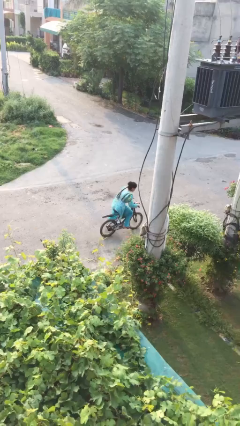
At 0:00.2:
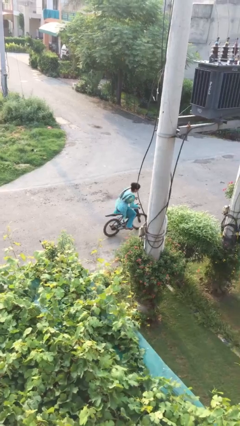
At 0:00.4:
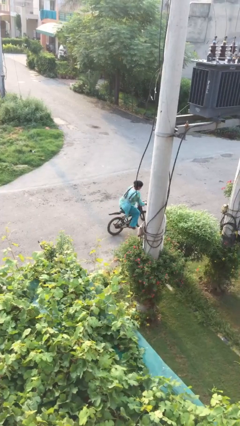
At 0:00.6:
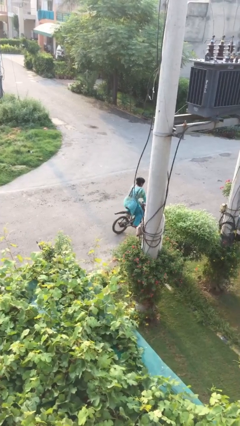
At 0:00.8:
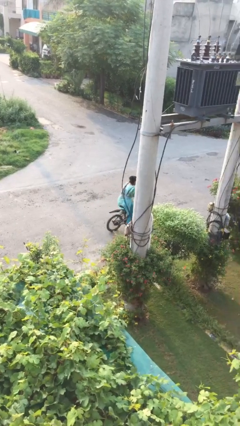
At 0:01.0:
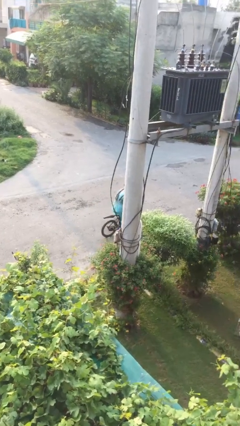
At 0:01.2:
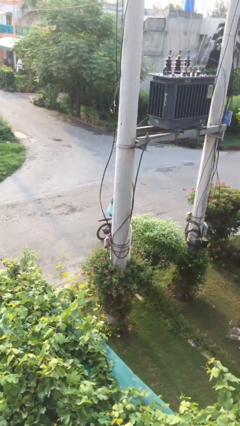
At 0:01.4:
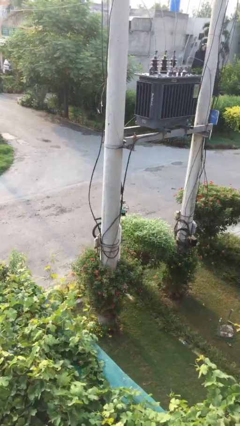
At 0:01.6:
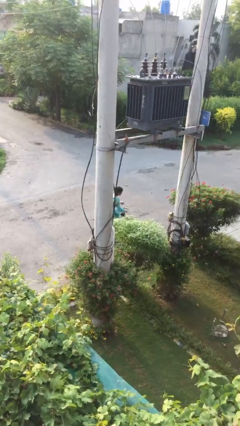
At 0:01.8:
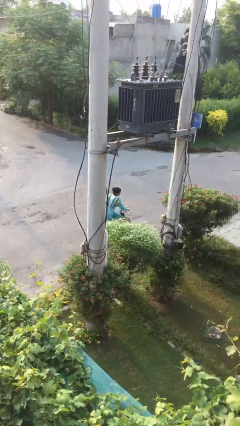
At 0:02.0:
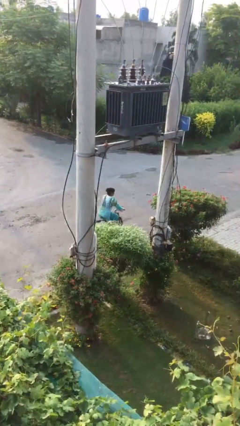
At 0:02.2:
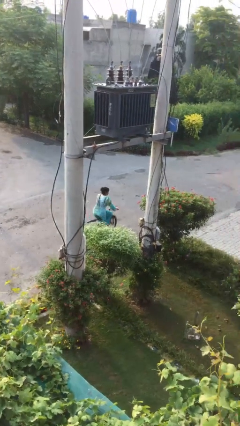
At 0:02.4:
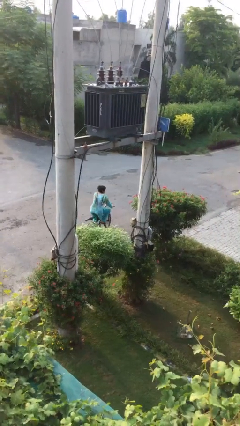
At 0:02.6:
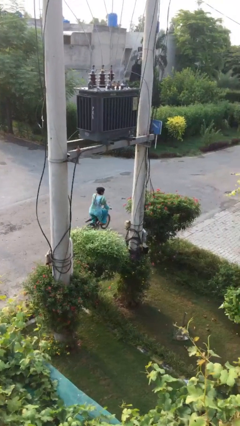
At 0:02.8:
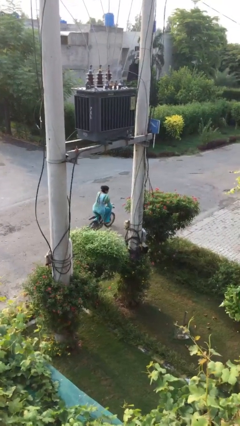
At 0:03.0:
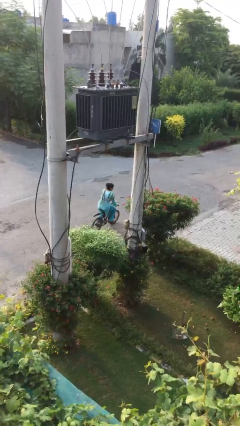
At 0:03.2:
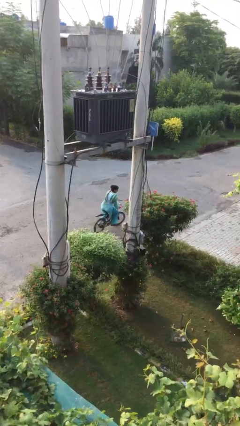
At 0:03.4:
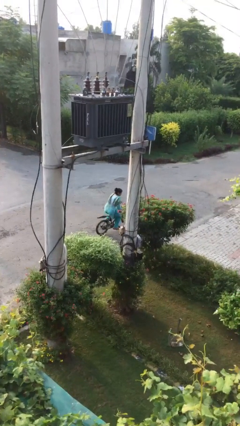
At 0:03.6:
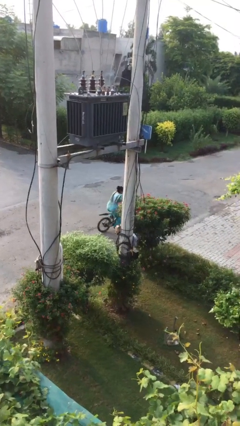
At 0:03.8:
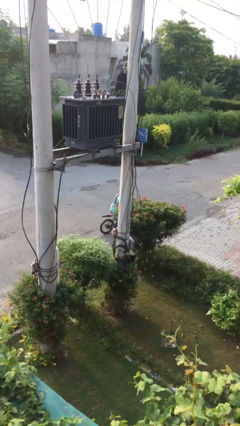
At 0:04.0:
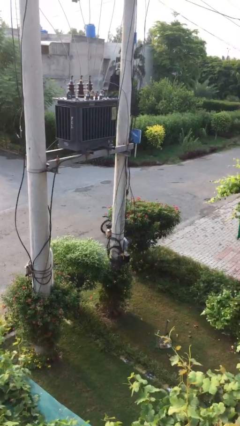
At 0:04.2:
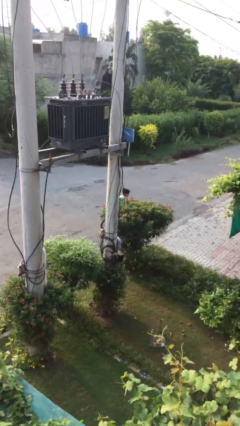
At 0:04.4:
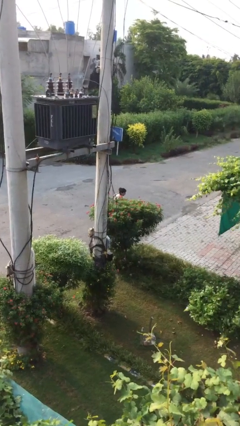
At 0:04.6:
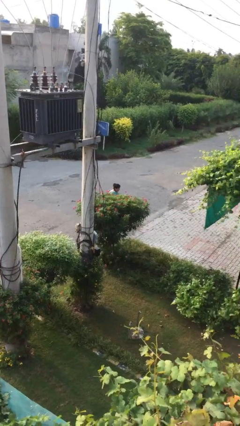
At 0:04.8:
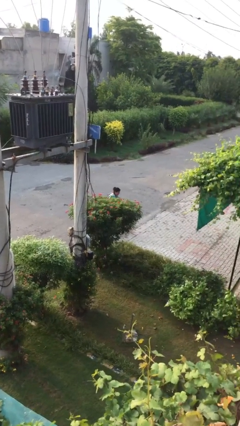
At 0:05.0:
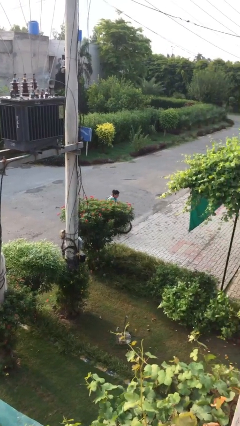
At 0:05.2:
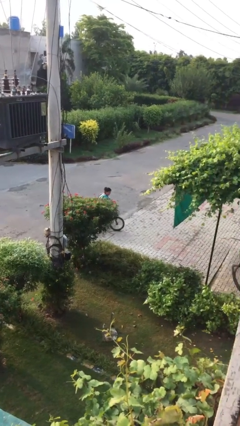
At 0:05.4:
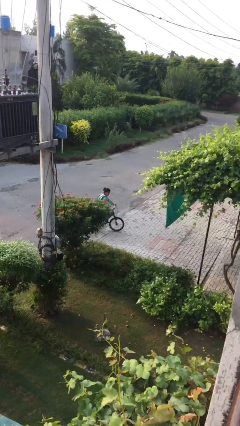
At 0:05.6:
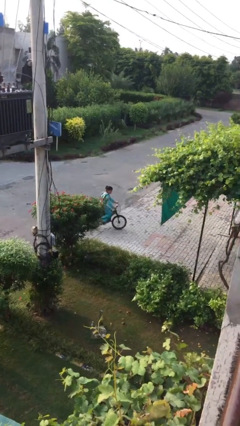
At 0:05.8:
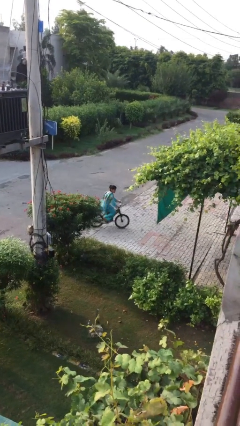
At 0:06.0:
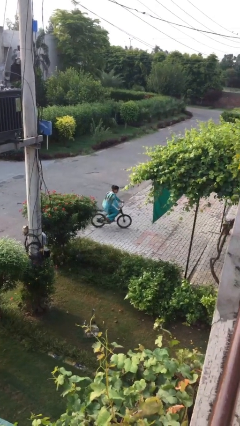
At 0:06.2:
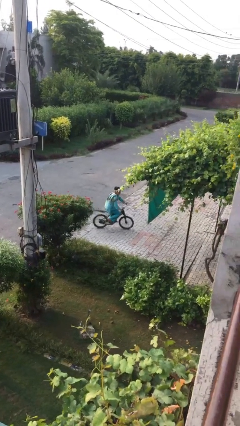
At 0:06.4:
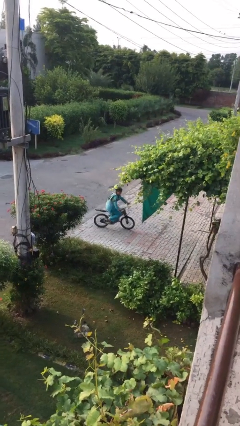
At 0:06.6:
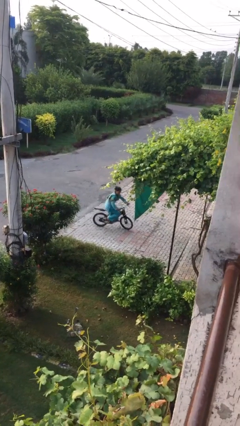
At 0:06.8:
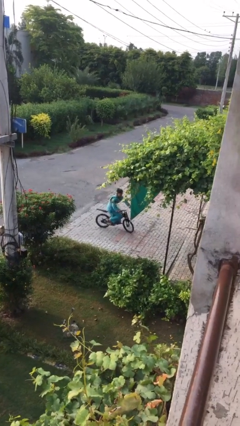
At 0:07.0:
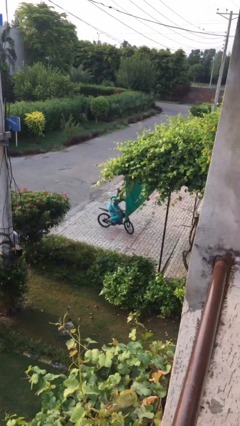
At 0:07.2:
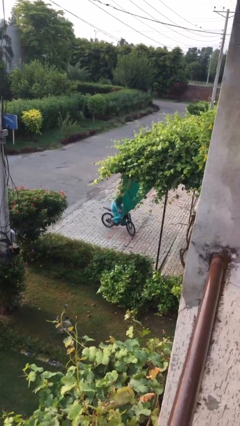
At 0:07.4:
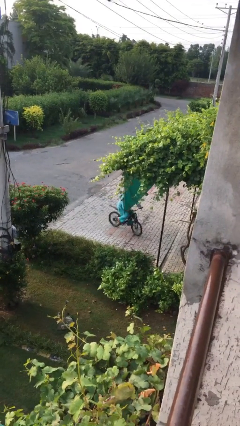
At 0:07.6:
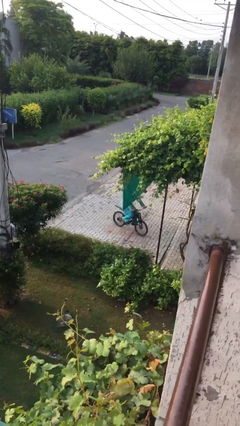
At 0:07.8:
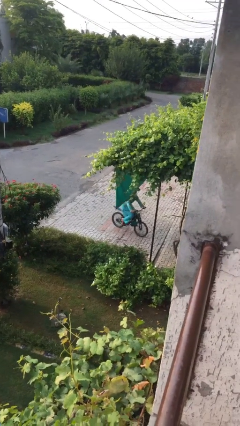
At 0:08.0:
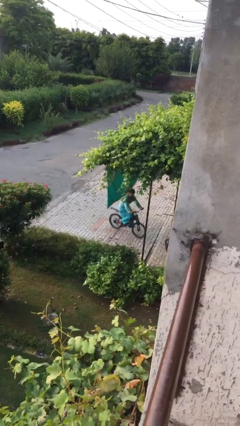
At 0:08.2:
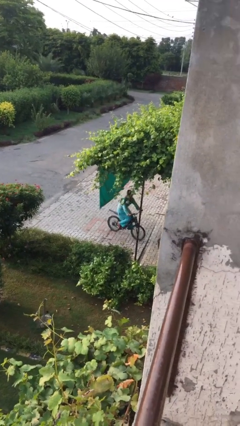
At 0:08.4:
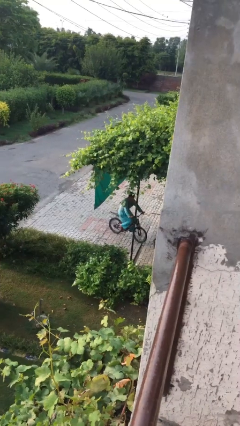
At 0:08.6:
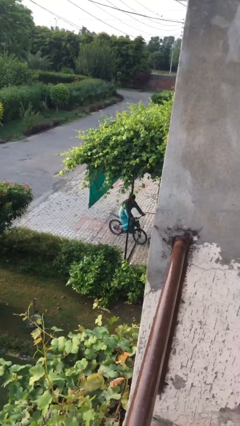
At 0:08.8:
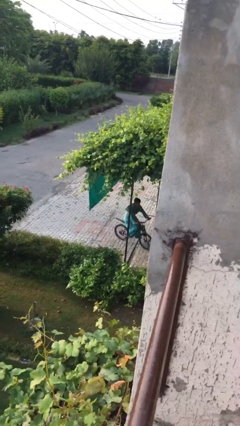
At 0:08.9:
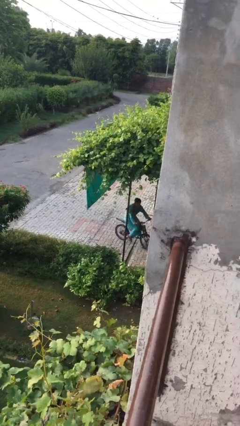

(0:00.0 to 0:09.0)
person rides bicycle

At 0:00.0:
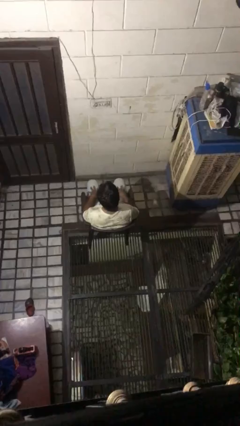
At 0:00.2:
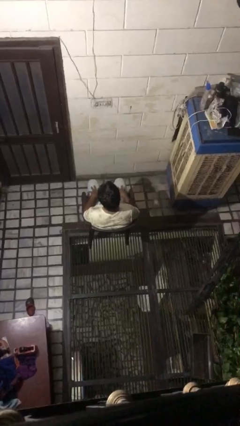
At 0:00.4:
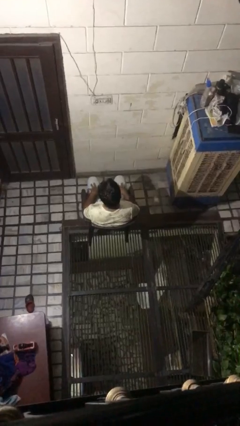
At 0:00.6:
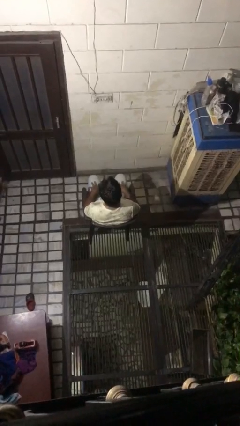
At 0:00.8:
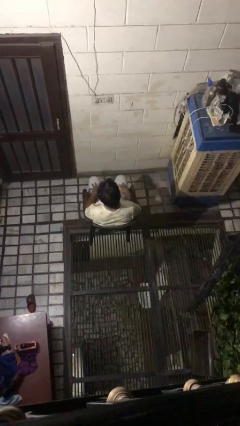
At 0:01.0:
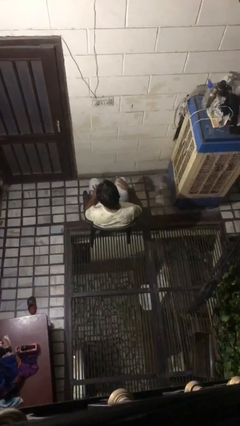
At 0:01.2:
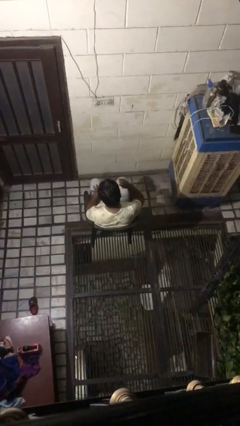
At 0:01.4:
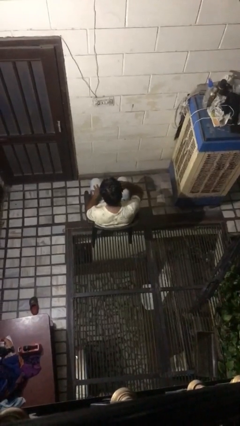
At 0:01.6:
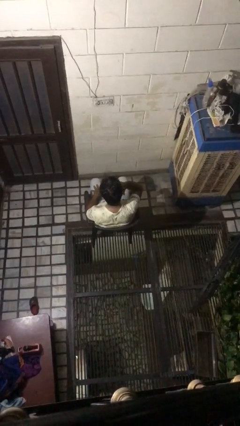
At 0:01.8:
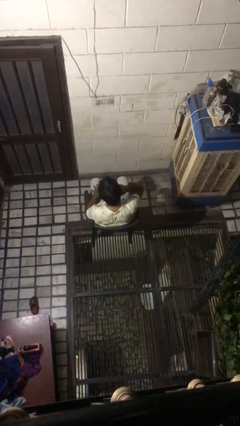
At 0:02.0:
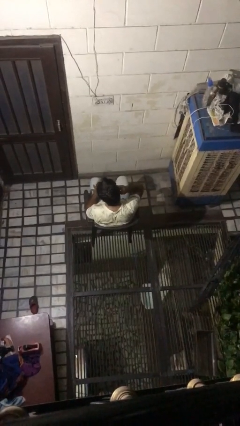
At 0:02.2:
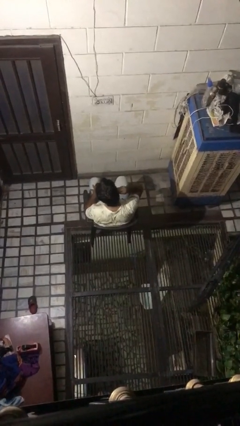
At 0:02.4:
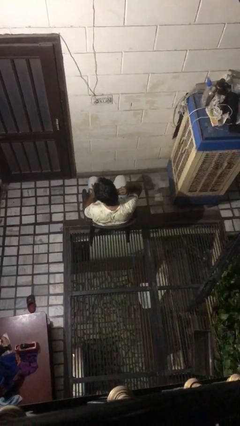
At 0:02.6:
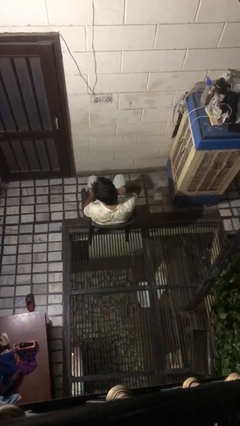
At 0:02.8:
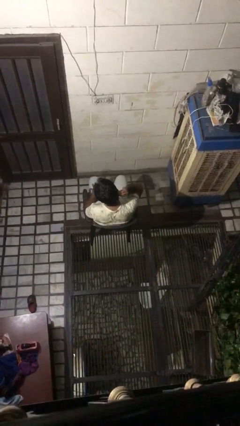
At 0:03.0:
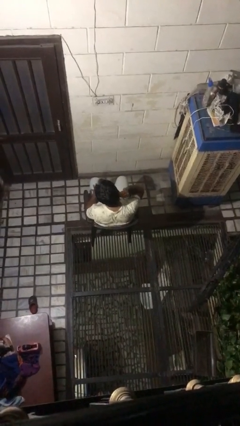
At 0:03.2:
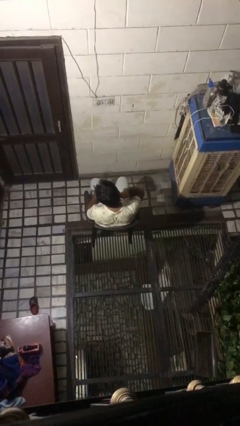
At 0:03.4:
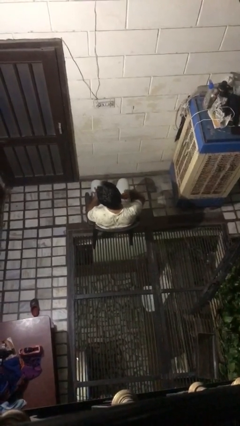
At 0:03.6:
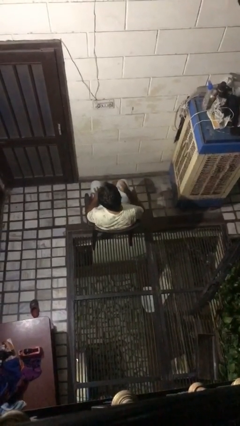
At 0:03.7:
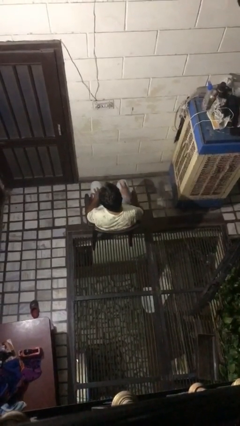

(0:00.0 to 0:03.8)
person strokes hair

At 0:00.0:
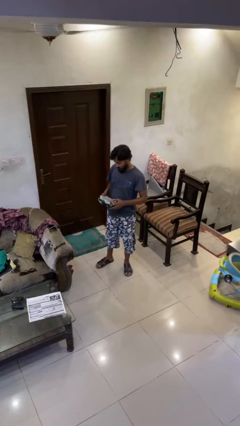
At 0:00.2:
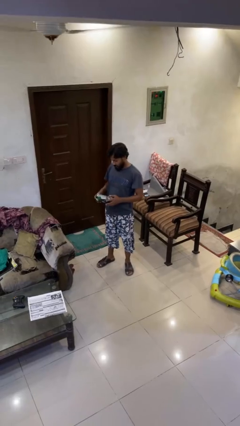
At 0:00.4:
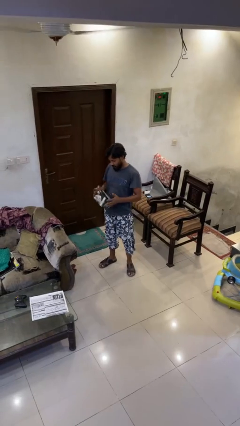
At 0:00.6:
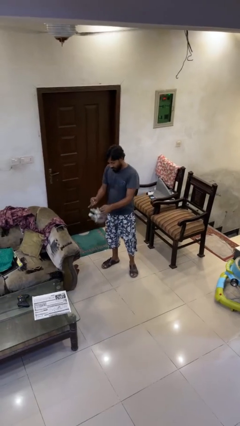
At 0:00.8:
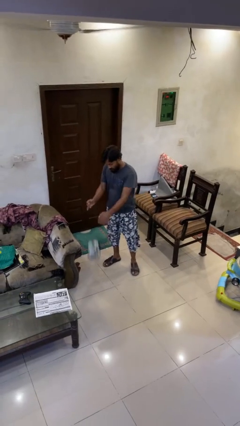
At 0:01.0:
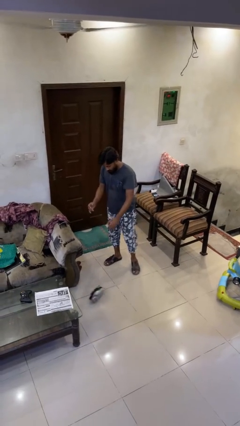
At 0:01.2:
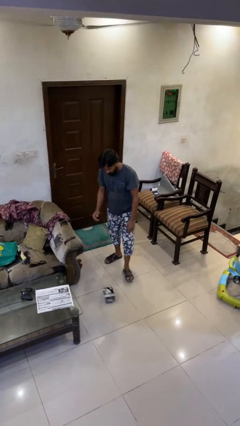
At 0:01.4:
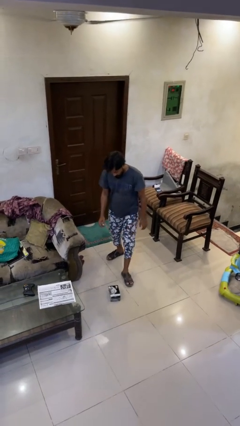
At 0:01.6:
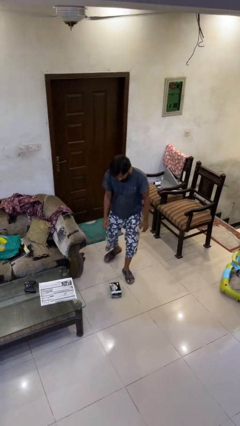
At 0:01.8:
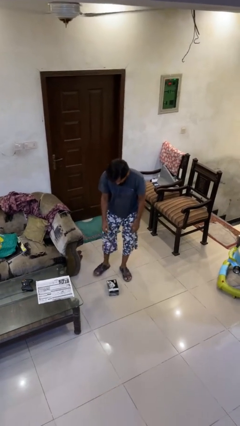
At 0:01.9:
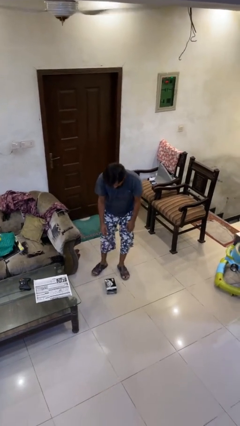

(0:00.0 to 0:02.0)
person drops object

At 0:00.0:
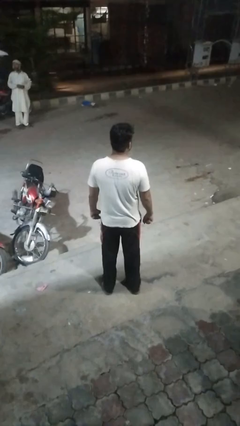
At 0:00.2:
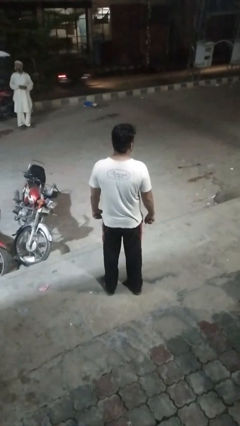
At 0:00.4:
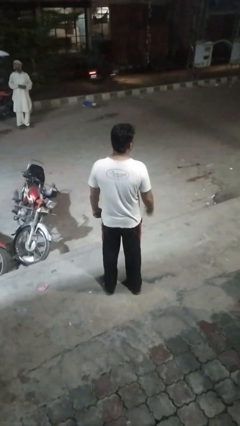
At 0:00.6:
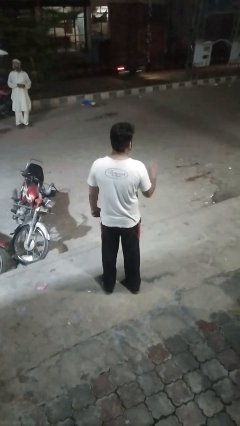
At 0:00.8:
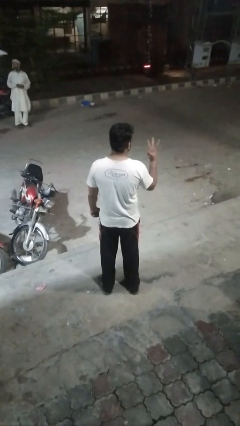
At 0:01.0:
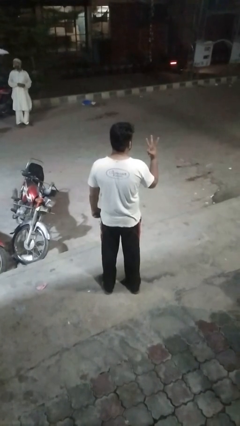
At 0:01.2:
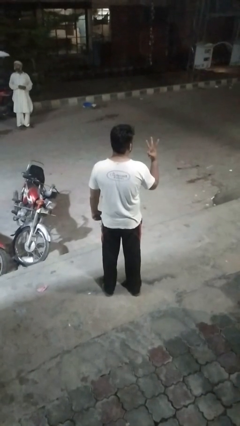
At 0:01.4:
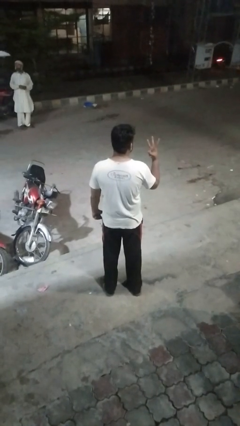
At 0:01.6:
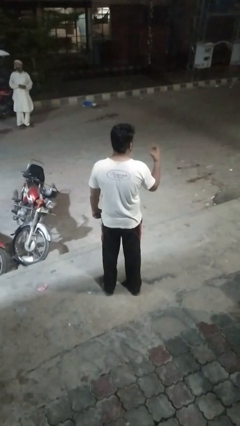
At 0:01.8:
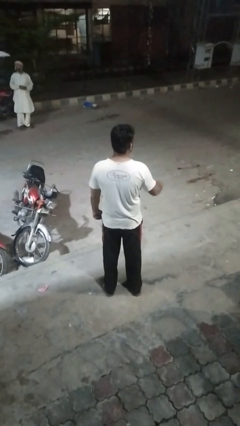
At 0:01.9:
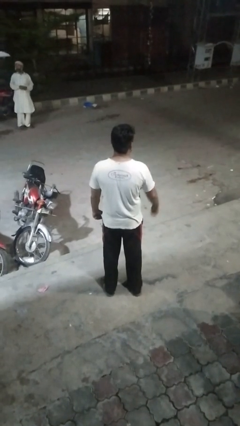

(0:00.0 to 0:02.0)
person gestures number three

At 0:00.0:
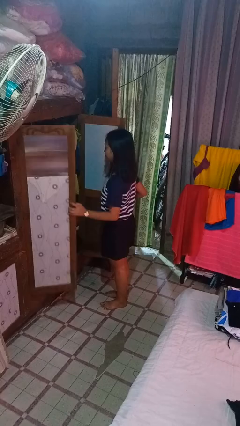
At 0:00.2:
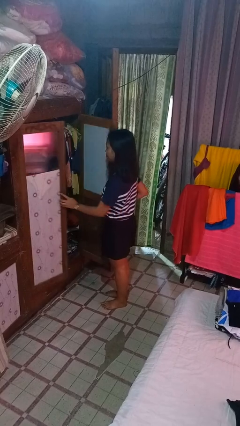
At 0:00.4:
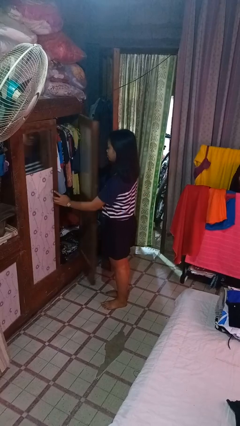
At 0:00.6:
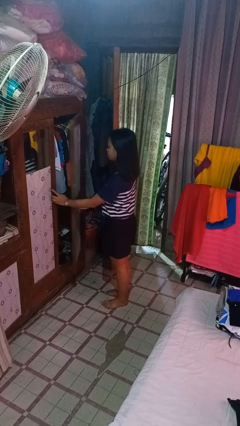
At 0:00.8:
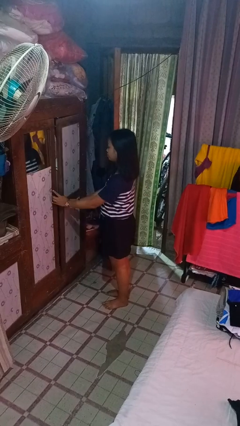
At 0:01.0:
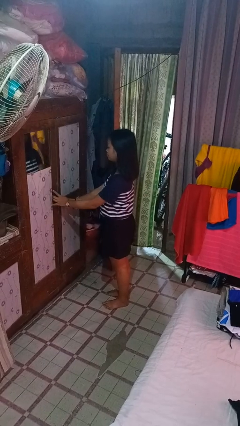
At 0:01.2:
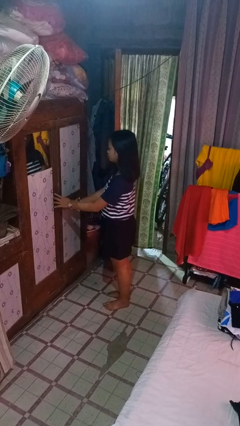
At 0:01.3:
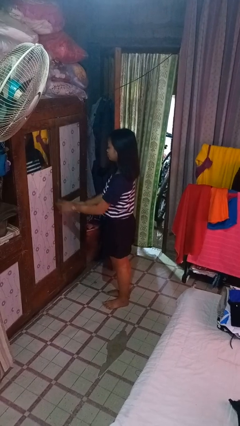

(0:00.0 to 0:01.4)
person closes closet door
